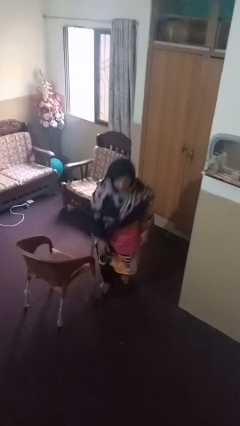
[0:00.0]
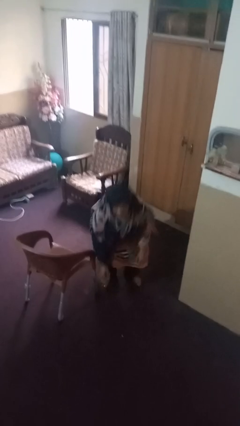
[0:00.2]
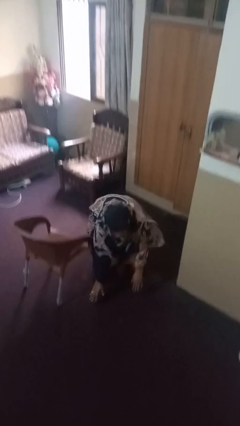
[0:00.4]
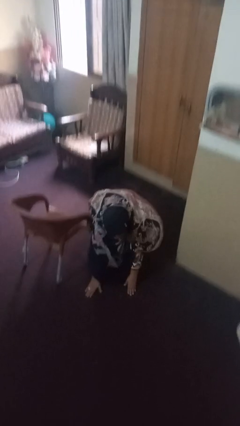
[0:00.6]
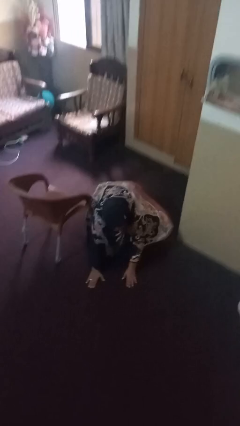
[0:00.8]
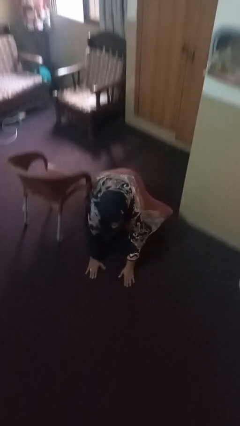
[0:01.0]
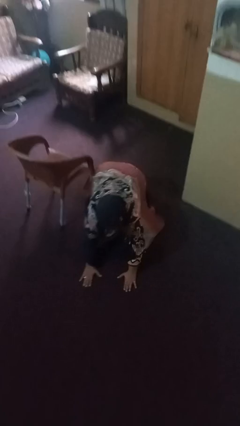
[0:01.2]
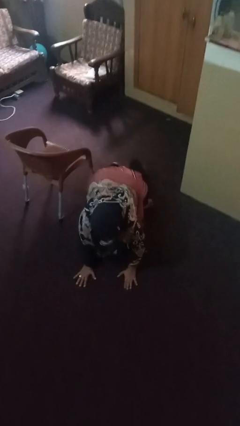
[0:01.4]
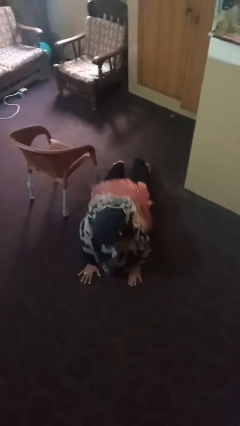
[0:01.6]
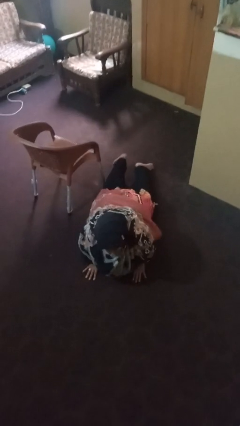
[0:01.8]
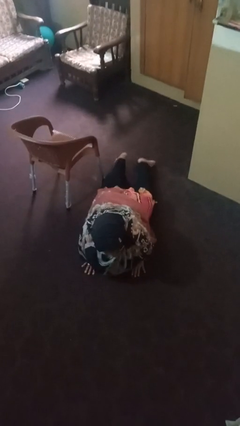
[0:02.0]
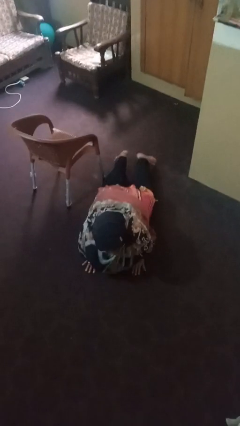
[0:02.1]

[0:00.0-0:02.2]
person lies down on floor

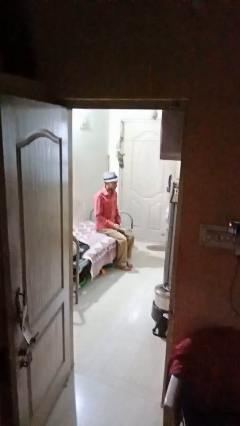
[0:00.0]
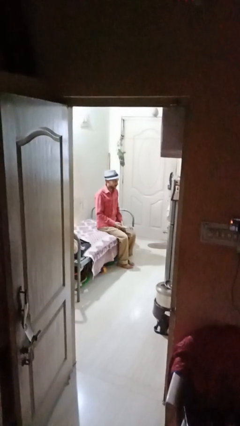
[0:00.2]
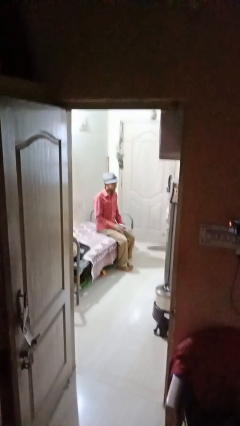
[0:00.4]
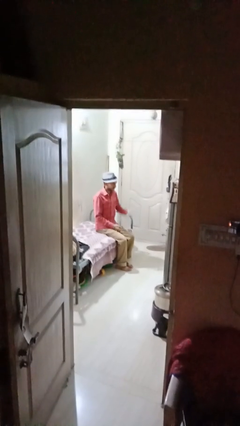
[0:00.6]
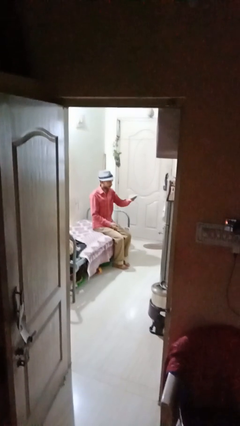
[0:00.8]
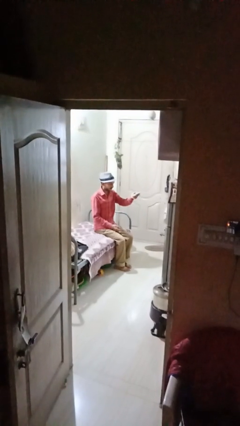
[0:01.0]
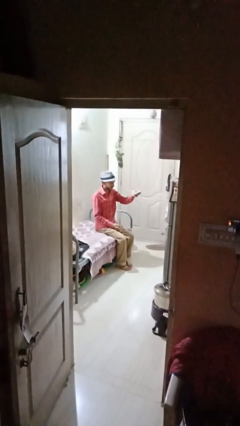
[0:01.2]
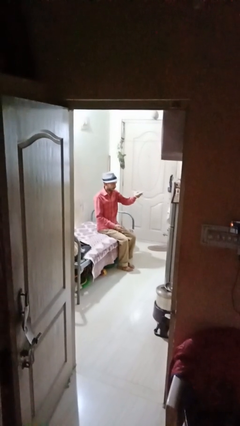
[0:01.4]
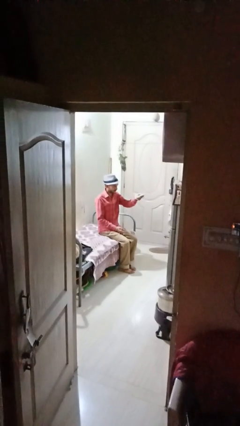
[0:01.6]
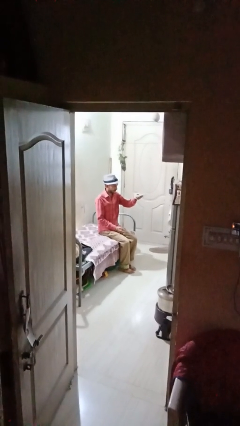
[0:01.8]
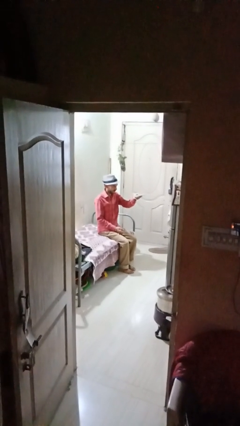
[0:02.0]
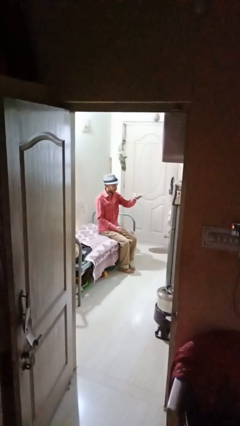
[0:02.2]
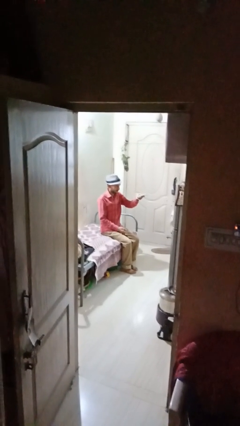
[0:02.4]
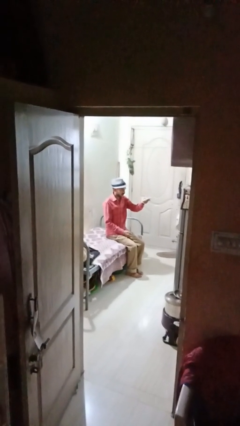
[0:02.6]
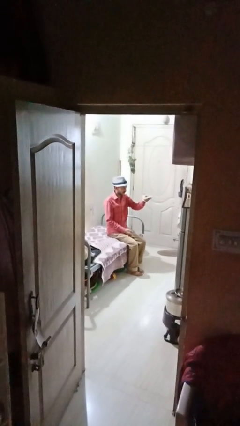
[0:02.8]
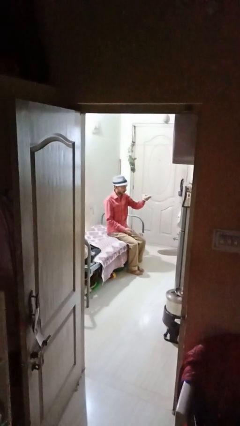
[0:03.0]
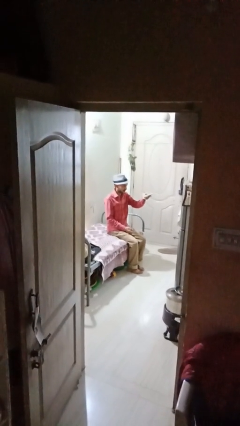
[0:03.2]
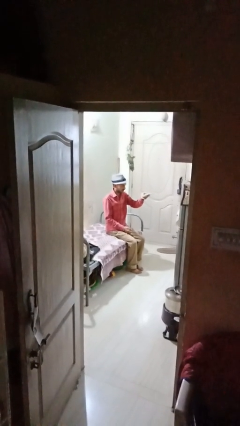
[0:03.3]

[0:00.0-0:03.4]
person uses television remote

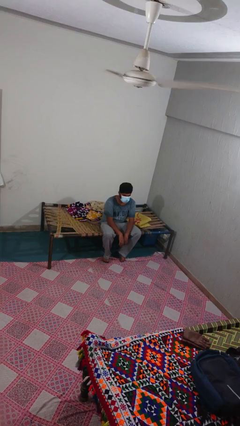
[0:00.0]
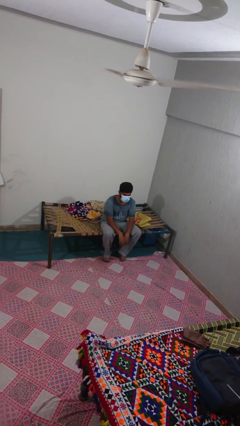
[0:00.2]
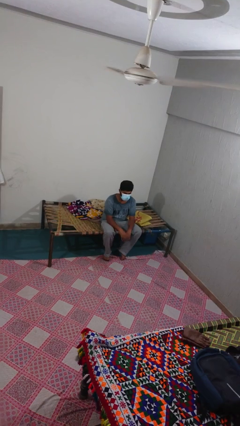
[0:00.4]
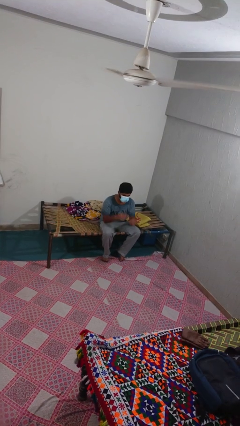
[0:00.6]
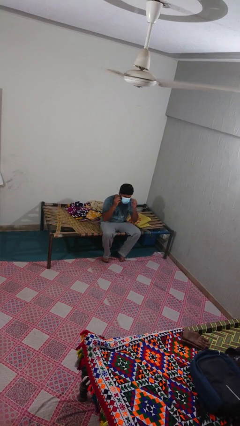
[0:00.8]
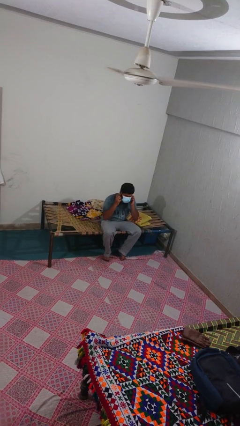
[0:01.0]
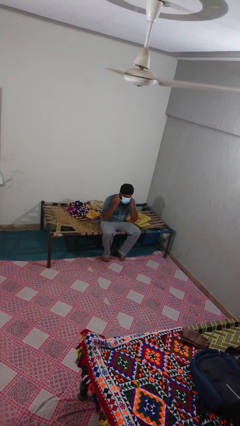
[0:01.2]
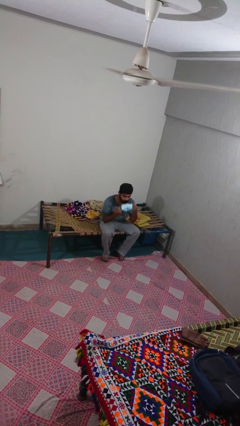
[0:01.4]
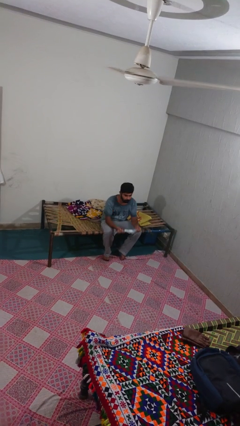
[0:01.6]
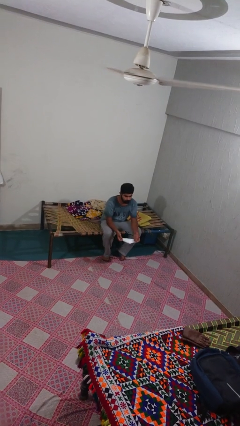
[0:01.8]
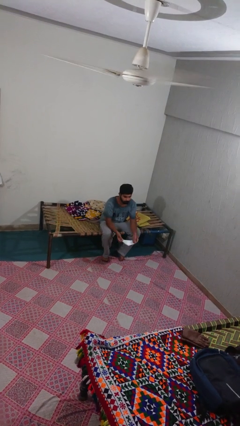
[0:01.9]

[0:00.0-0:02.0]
person takes off facemask

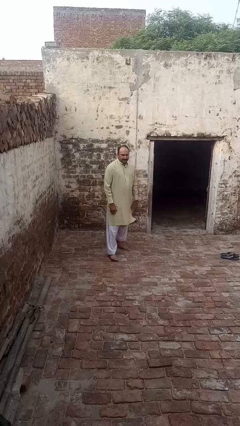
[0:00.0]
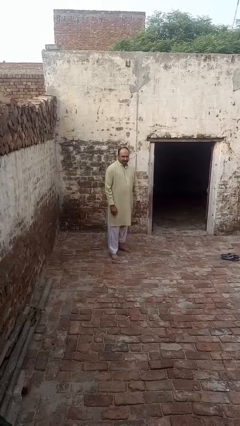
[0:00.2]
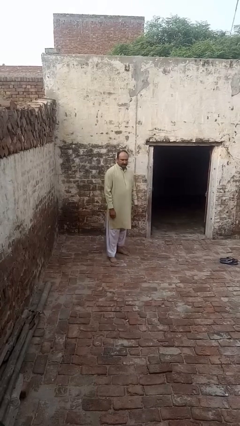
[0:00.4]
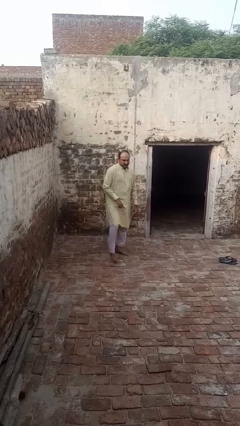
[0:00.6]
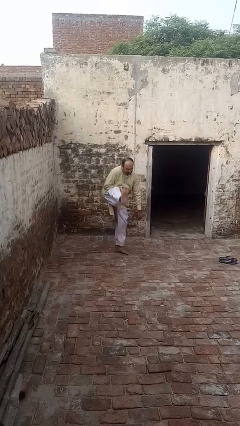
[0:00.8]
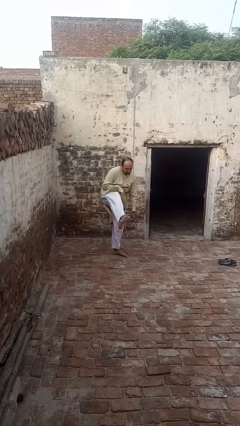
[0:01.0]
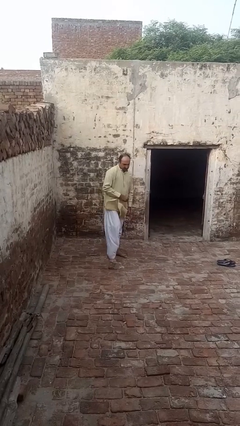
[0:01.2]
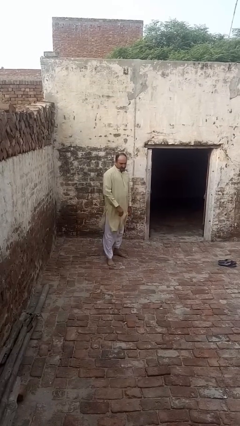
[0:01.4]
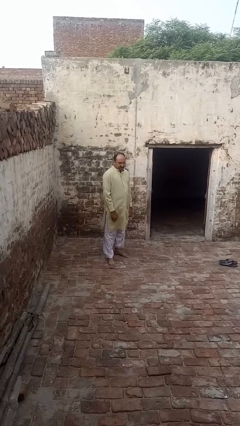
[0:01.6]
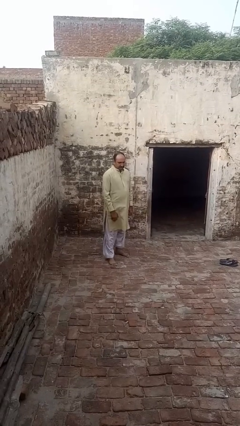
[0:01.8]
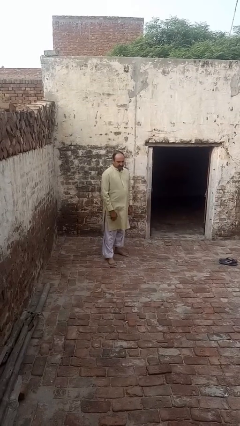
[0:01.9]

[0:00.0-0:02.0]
person karate kicks

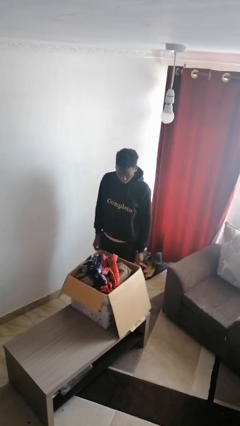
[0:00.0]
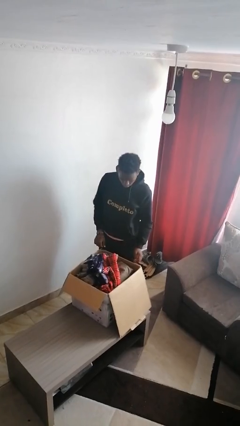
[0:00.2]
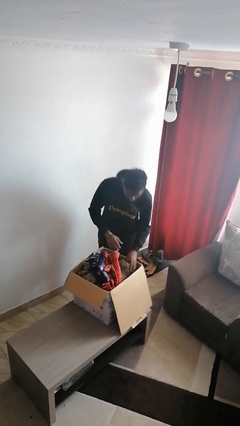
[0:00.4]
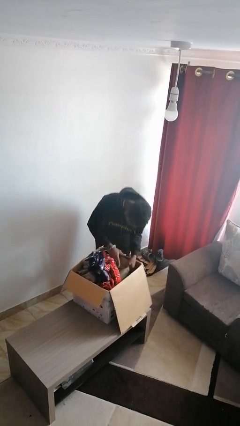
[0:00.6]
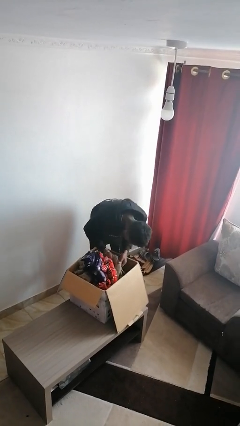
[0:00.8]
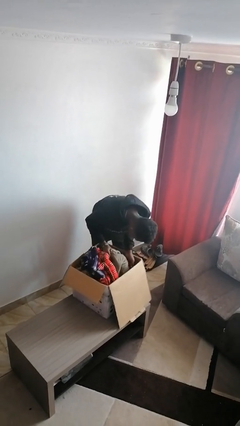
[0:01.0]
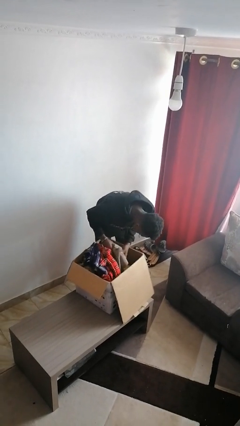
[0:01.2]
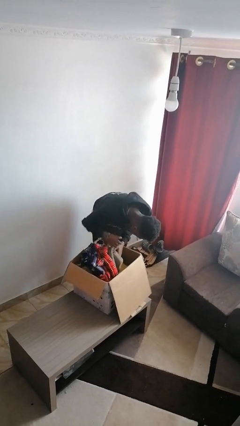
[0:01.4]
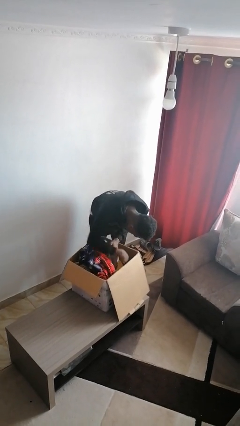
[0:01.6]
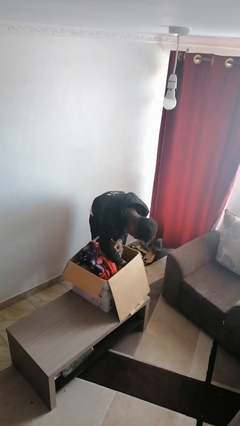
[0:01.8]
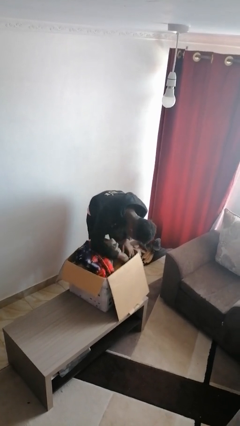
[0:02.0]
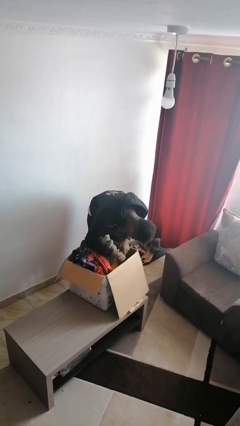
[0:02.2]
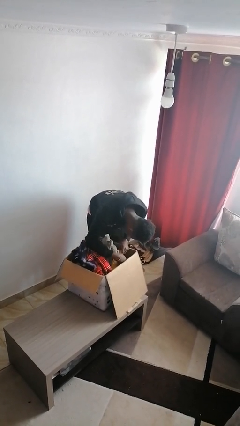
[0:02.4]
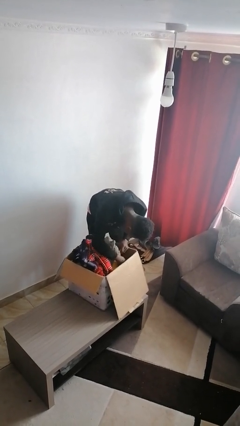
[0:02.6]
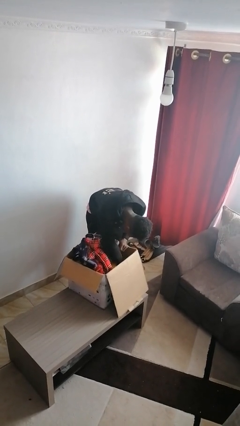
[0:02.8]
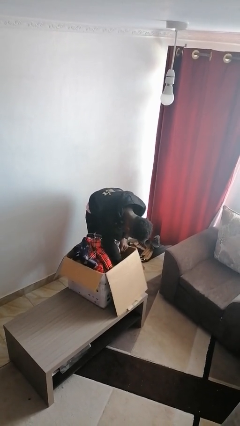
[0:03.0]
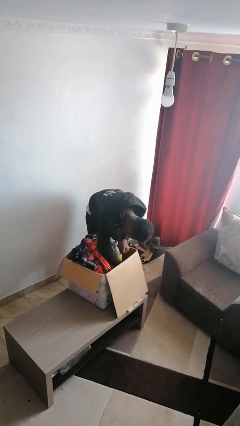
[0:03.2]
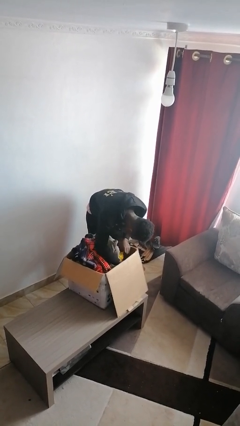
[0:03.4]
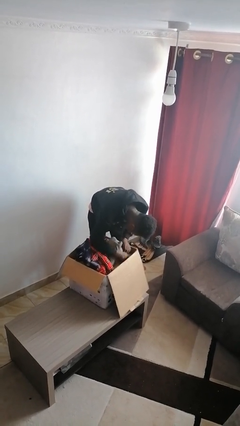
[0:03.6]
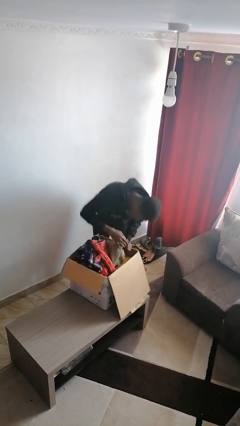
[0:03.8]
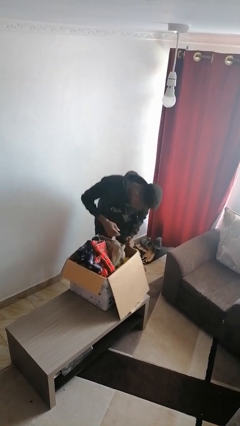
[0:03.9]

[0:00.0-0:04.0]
person searches in box

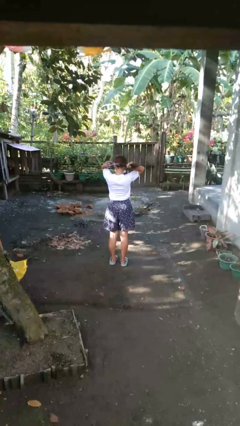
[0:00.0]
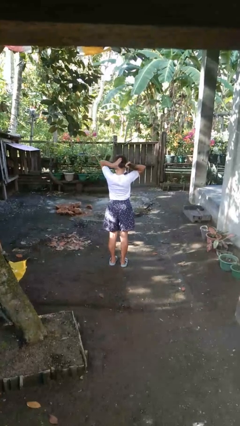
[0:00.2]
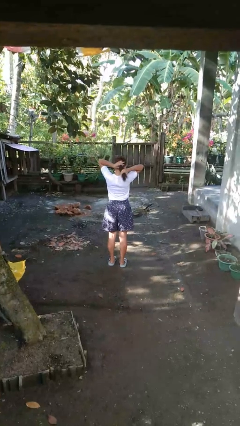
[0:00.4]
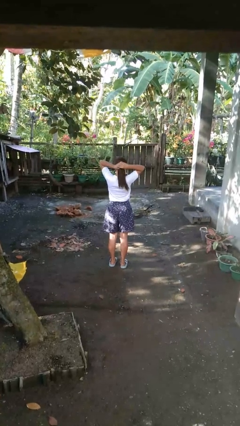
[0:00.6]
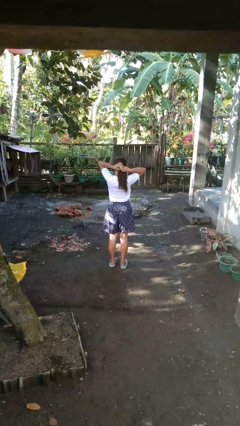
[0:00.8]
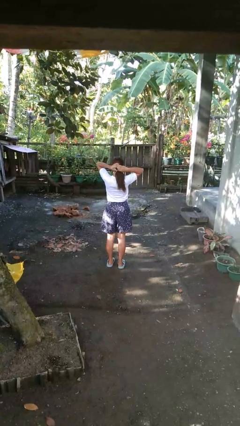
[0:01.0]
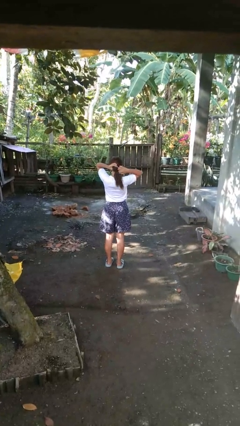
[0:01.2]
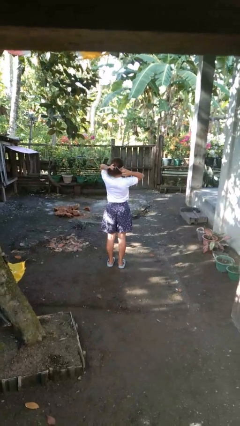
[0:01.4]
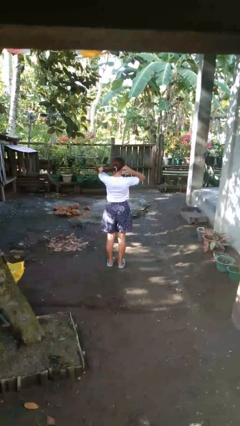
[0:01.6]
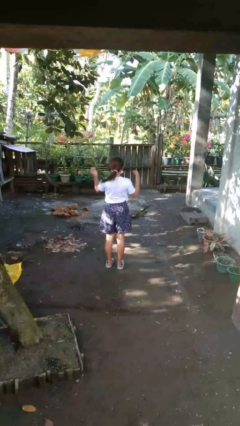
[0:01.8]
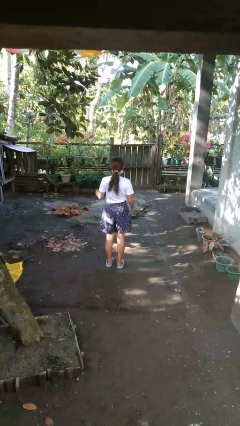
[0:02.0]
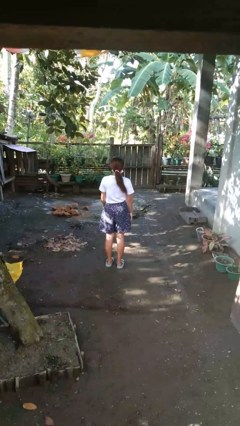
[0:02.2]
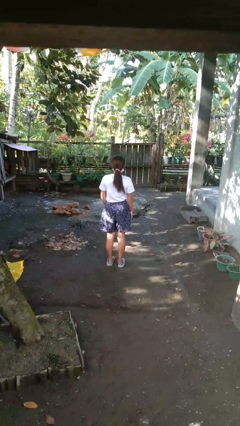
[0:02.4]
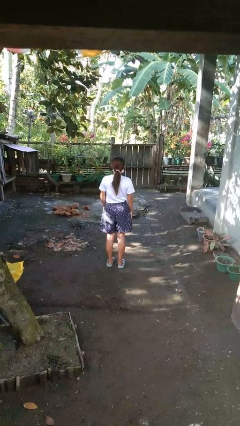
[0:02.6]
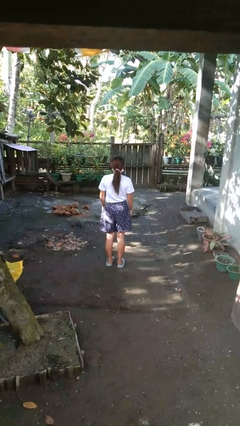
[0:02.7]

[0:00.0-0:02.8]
person puts hair in ponytail

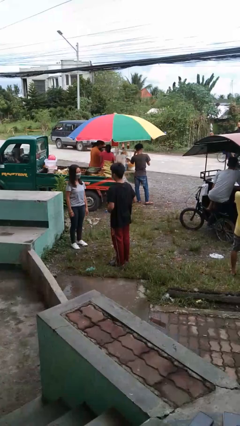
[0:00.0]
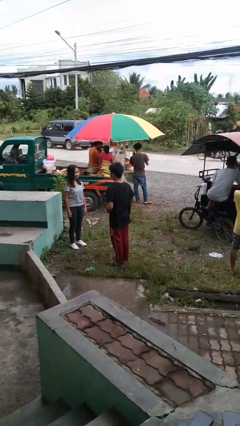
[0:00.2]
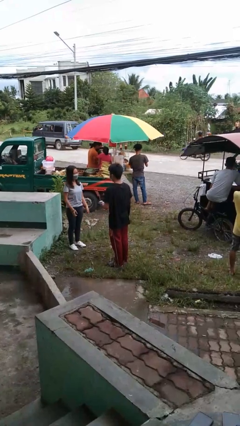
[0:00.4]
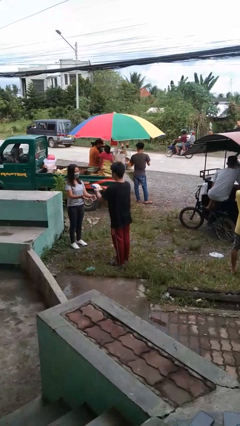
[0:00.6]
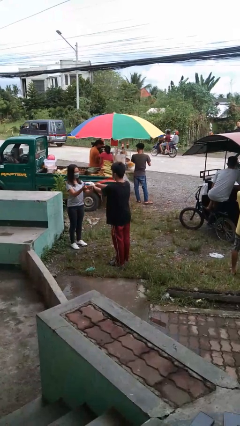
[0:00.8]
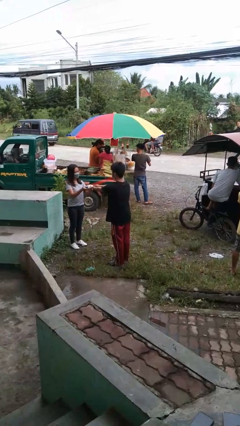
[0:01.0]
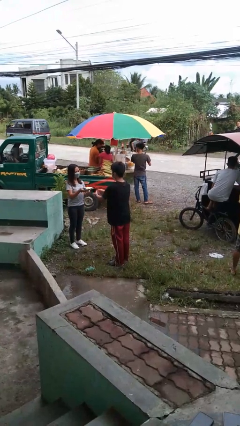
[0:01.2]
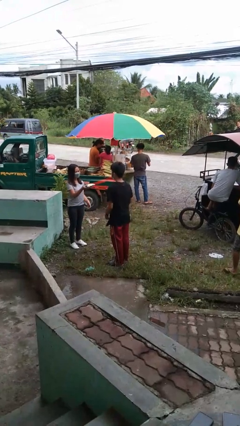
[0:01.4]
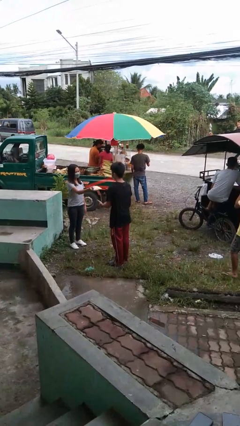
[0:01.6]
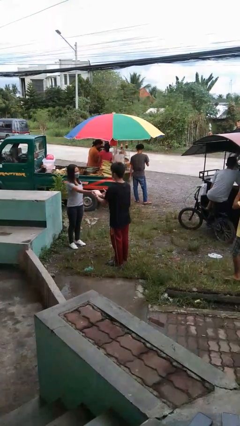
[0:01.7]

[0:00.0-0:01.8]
person transfers object to person
